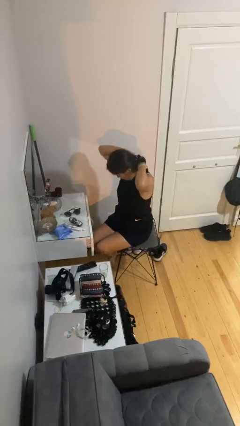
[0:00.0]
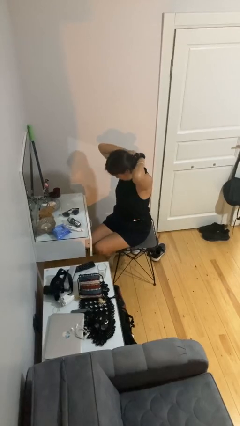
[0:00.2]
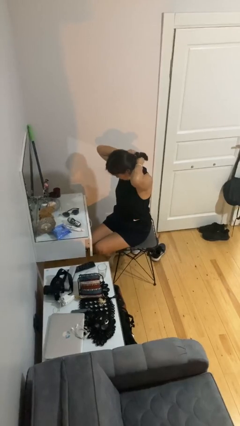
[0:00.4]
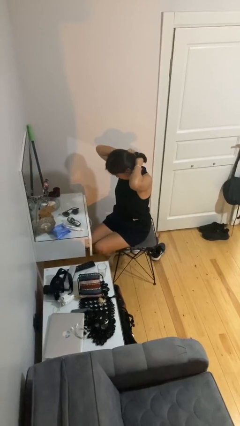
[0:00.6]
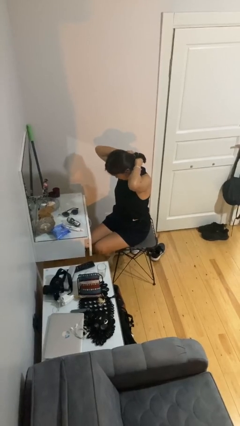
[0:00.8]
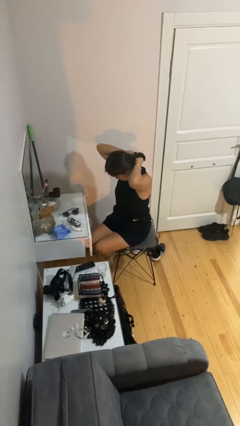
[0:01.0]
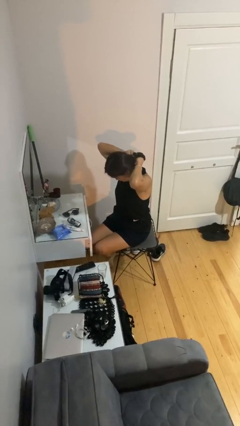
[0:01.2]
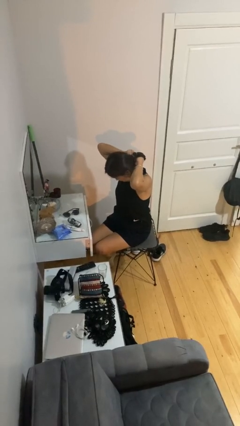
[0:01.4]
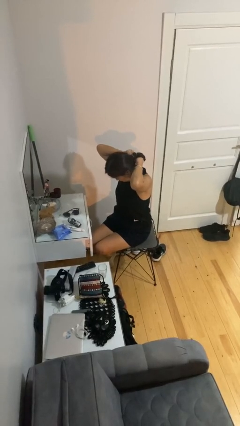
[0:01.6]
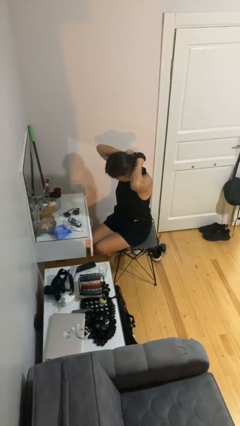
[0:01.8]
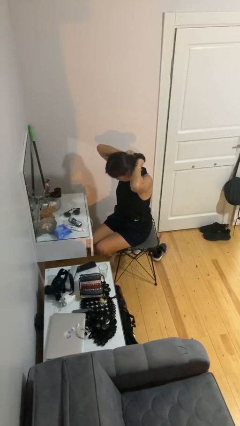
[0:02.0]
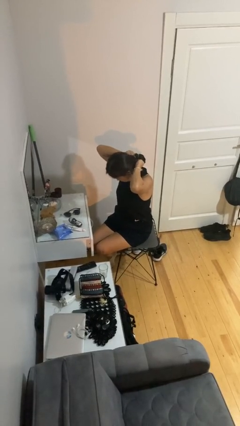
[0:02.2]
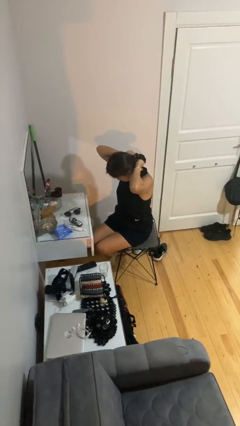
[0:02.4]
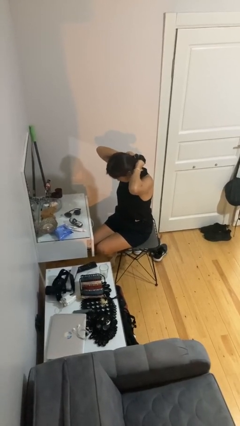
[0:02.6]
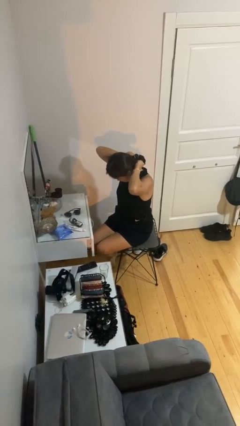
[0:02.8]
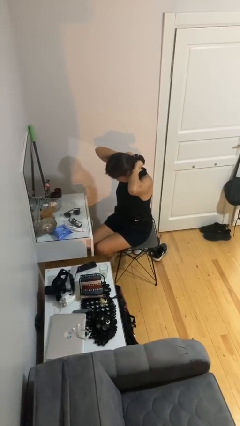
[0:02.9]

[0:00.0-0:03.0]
person takes off necklace

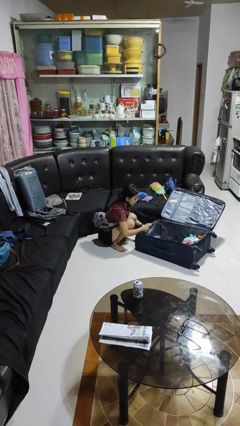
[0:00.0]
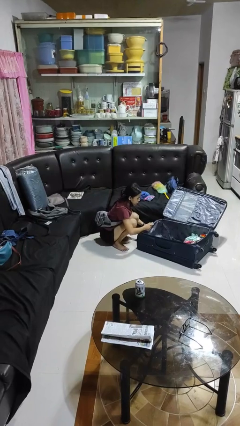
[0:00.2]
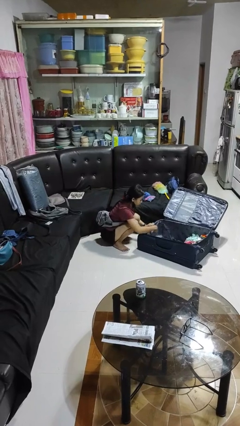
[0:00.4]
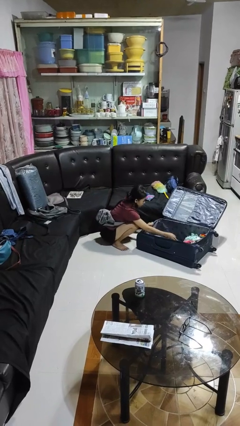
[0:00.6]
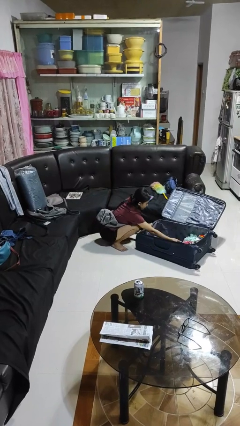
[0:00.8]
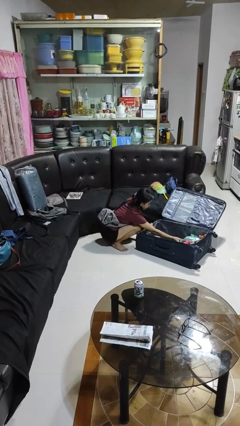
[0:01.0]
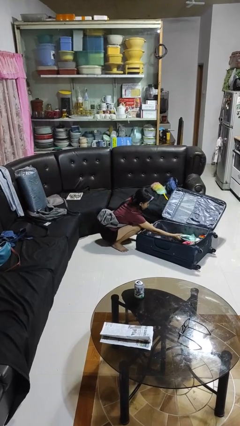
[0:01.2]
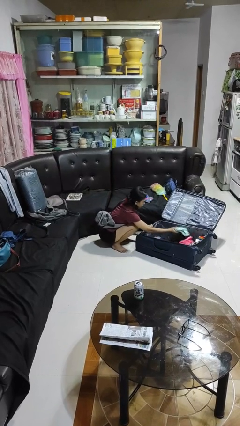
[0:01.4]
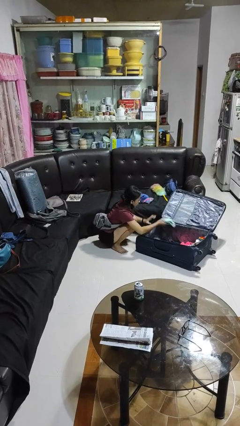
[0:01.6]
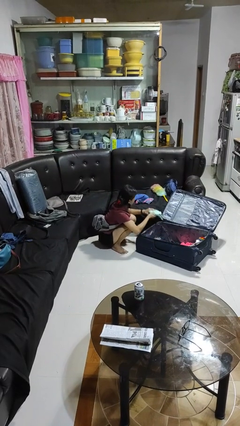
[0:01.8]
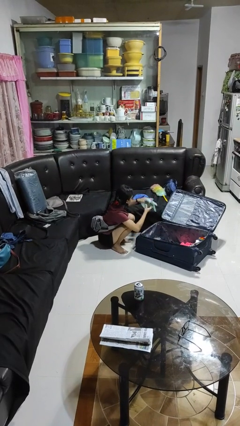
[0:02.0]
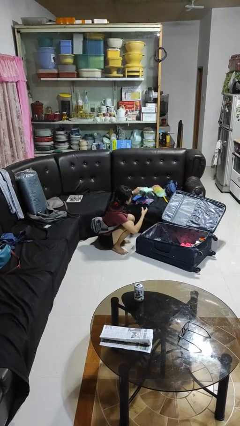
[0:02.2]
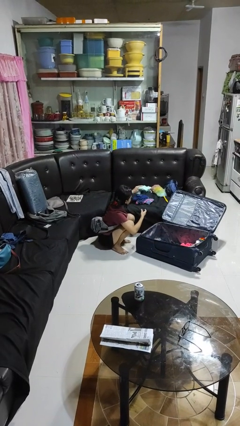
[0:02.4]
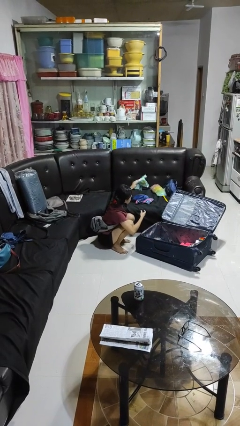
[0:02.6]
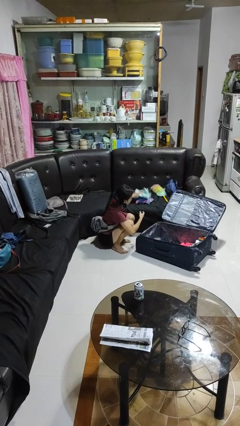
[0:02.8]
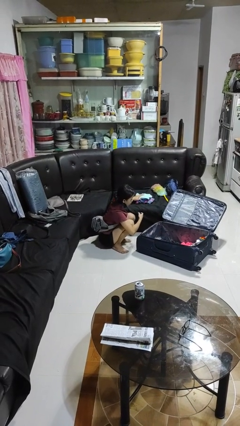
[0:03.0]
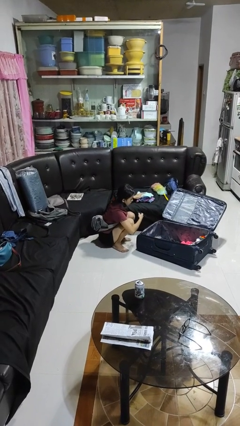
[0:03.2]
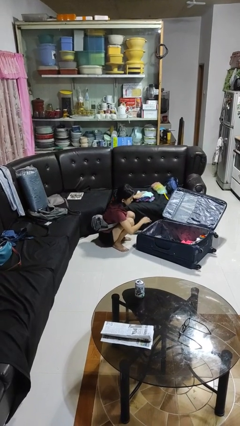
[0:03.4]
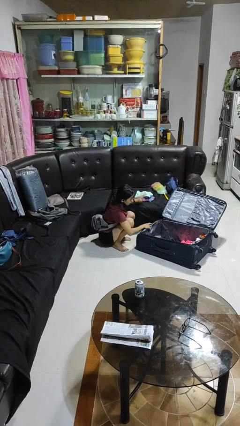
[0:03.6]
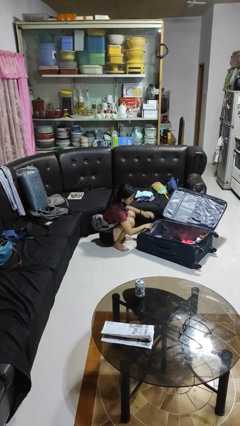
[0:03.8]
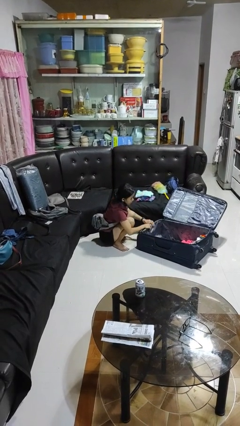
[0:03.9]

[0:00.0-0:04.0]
person unloads clothes from suitcase

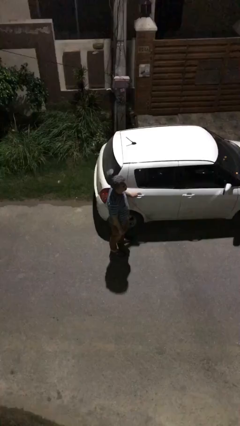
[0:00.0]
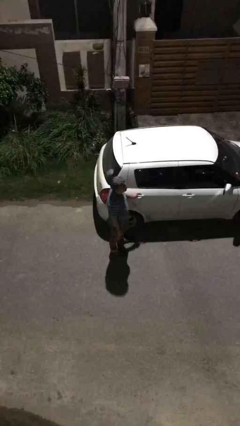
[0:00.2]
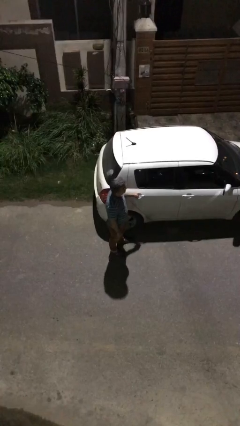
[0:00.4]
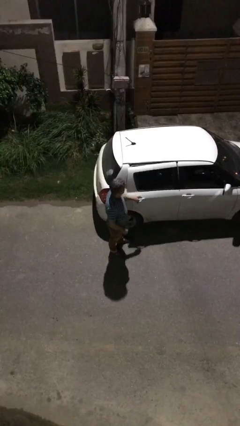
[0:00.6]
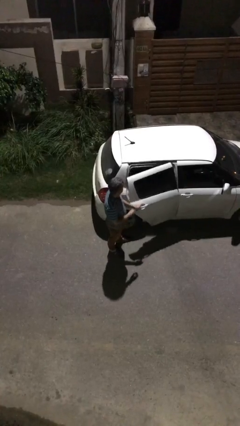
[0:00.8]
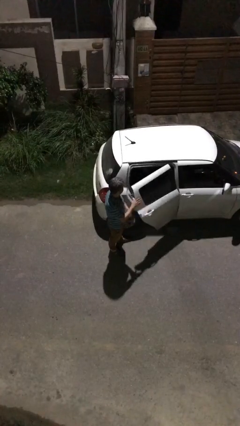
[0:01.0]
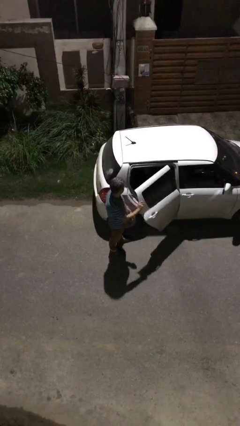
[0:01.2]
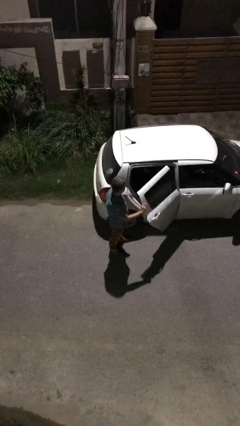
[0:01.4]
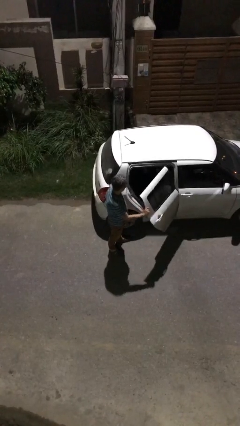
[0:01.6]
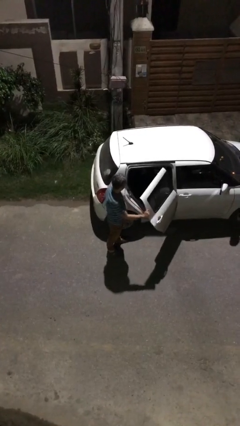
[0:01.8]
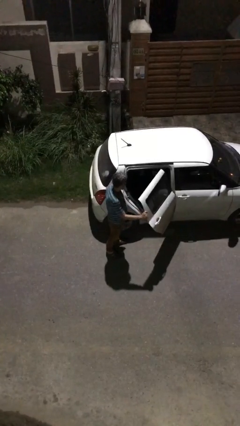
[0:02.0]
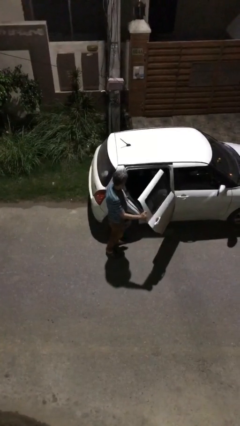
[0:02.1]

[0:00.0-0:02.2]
person opens car door

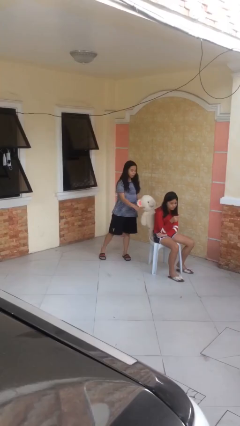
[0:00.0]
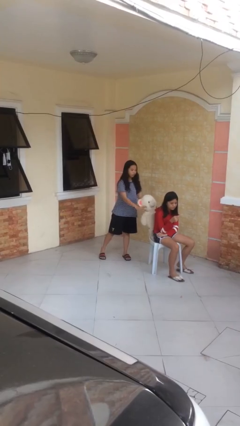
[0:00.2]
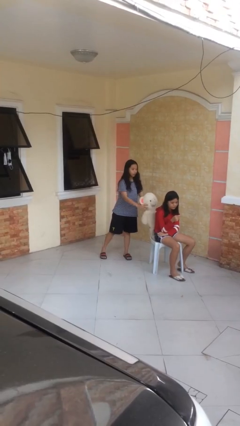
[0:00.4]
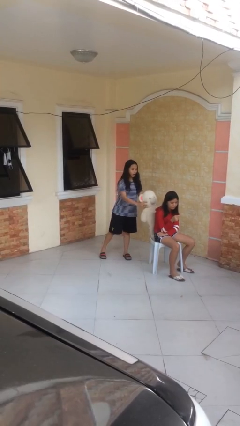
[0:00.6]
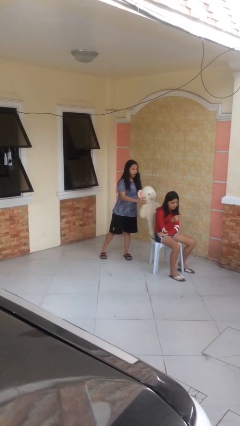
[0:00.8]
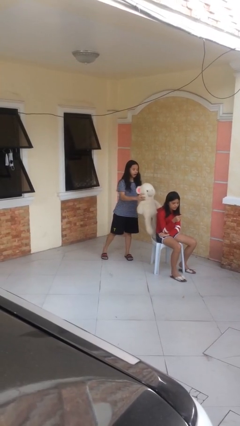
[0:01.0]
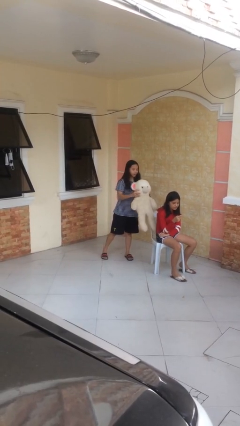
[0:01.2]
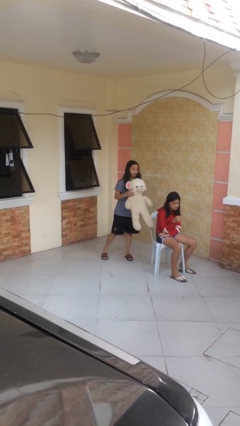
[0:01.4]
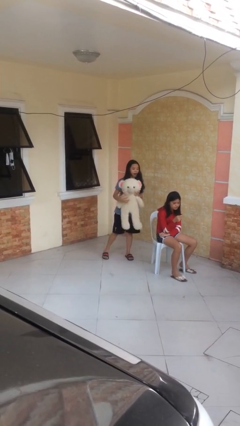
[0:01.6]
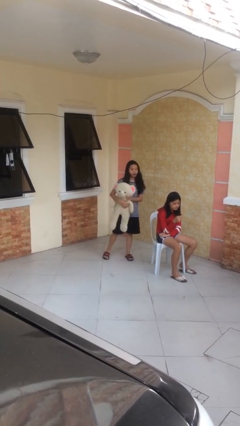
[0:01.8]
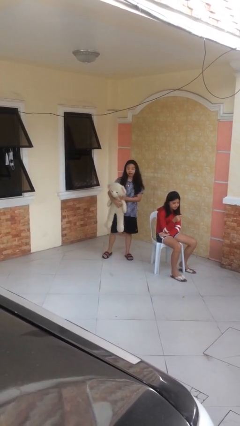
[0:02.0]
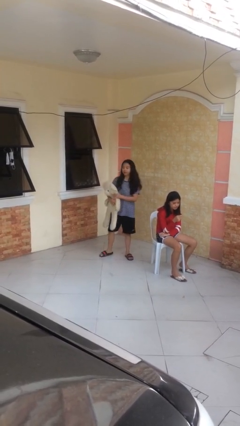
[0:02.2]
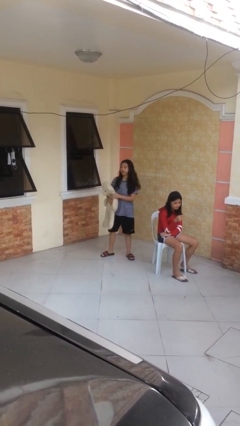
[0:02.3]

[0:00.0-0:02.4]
person steals object from person

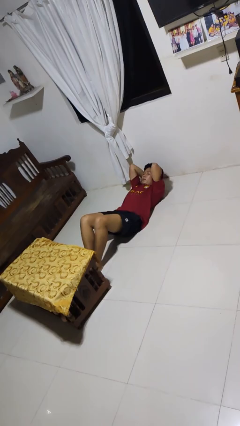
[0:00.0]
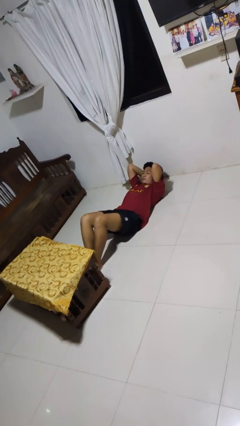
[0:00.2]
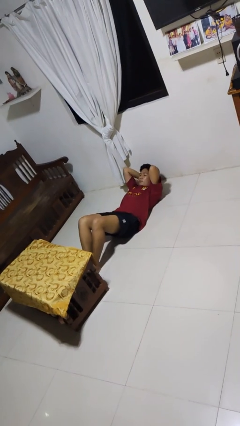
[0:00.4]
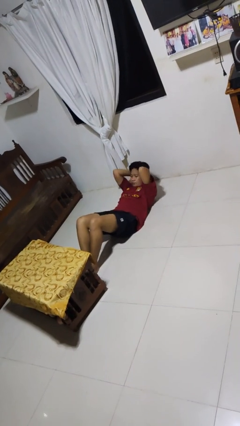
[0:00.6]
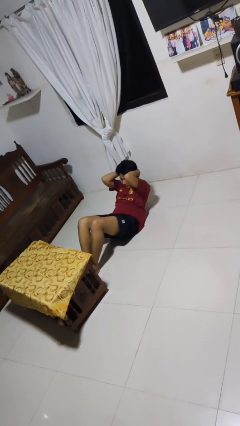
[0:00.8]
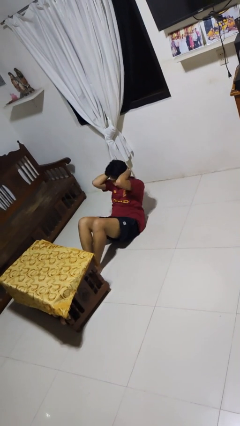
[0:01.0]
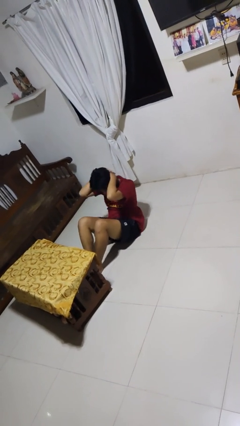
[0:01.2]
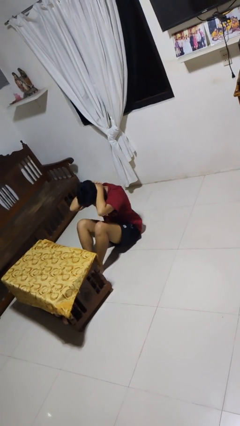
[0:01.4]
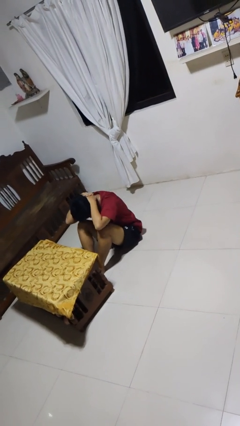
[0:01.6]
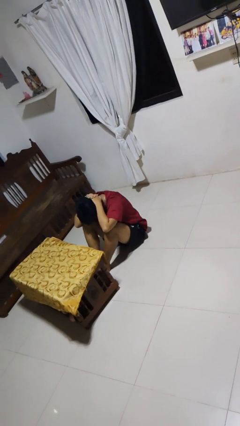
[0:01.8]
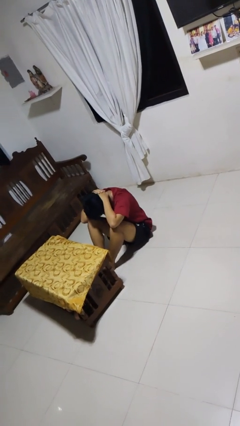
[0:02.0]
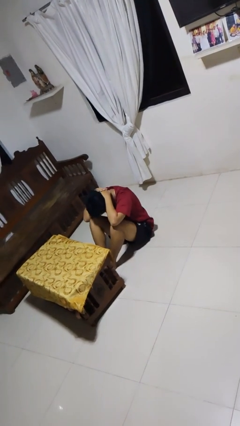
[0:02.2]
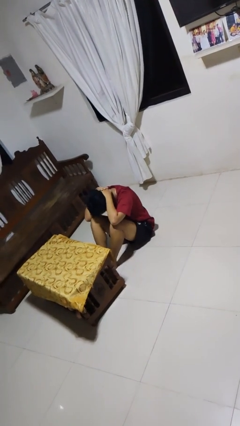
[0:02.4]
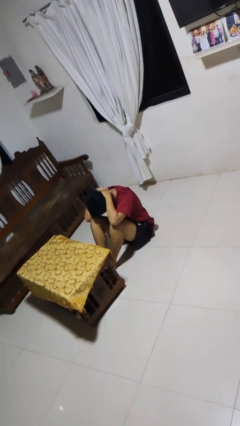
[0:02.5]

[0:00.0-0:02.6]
person exercises with situp

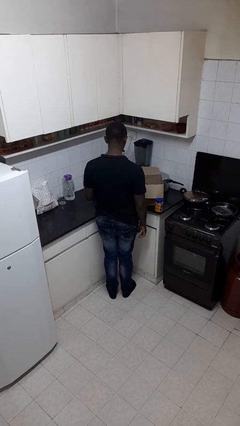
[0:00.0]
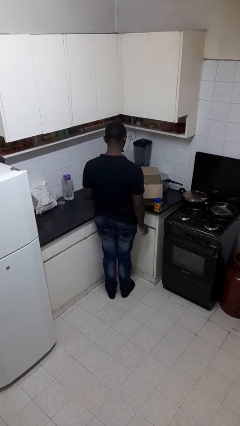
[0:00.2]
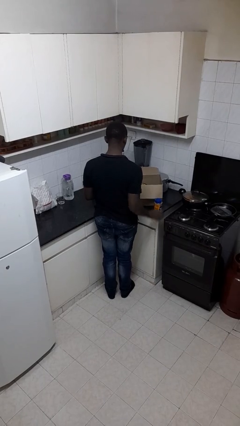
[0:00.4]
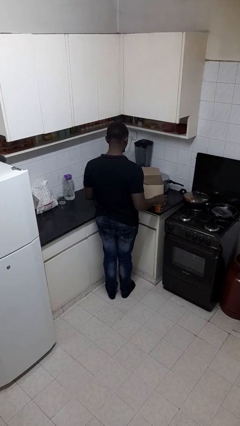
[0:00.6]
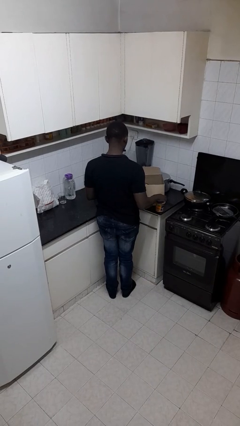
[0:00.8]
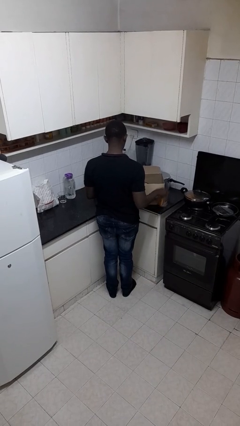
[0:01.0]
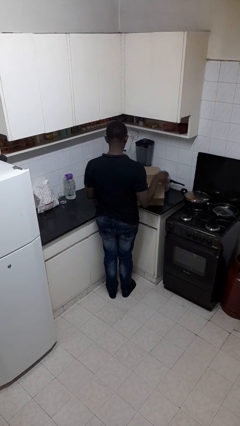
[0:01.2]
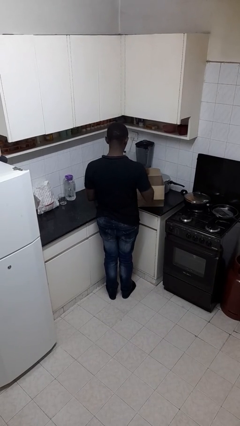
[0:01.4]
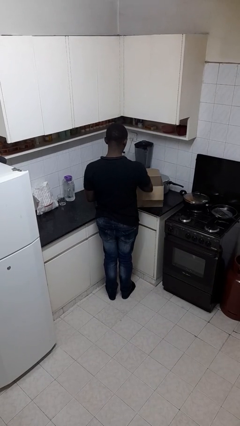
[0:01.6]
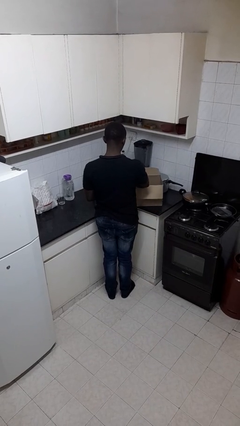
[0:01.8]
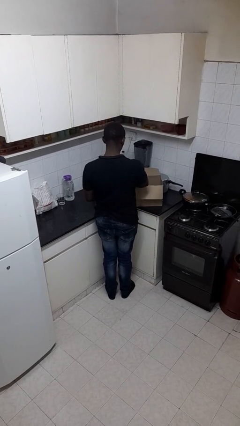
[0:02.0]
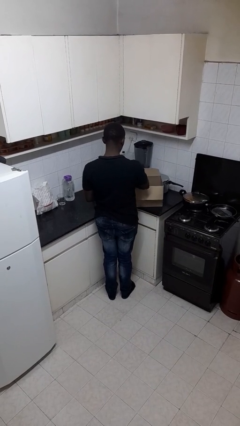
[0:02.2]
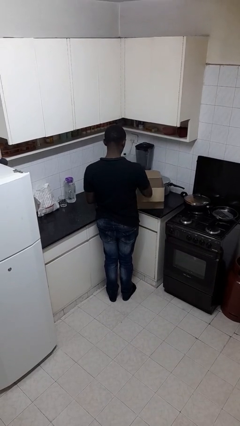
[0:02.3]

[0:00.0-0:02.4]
person puts object into box

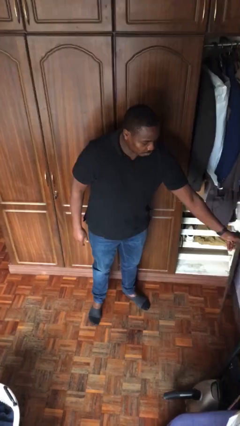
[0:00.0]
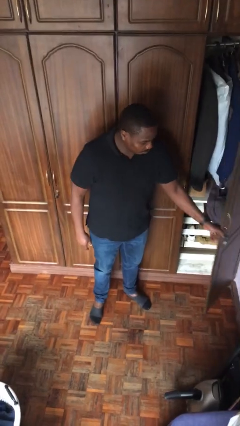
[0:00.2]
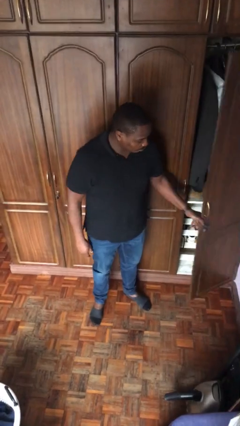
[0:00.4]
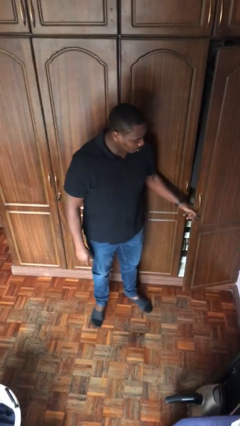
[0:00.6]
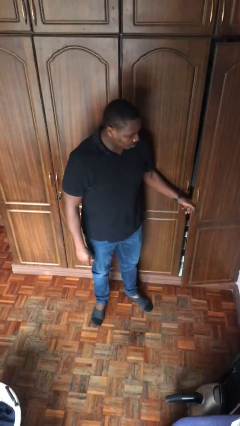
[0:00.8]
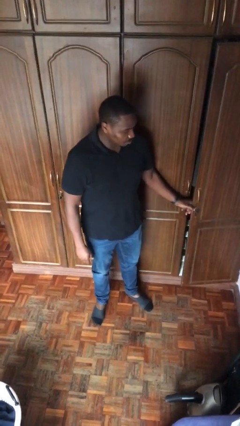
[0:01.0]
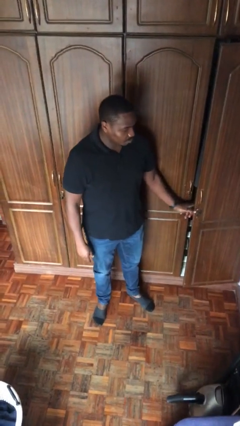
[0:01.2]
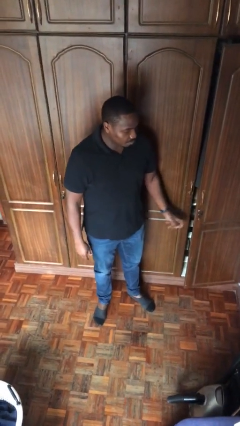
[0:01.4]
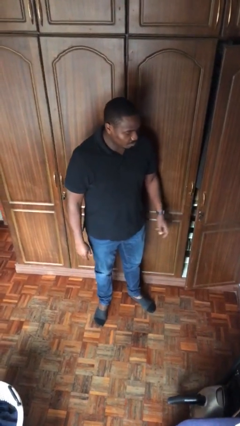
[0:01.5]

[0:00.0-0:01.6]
person closes closet door
